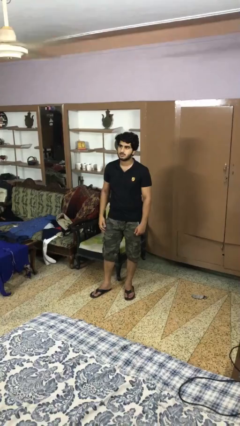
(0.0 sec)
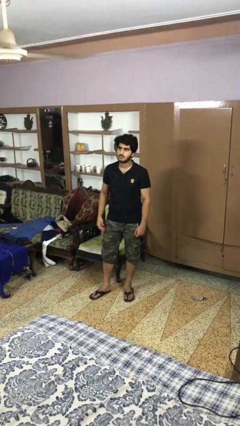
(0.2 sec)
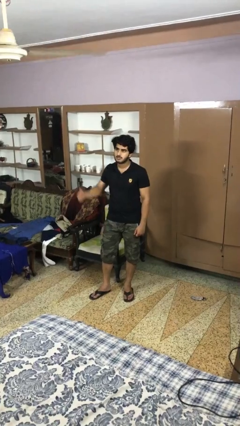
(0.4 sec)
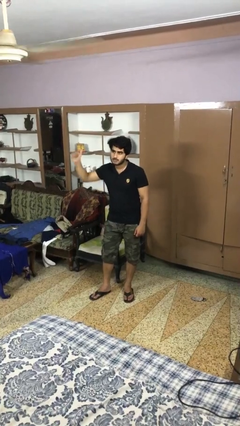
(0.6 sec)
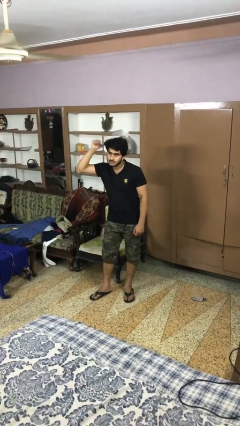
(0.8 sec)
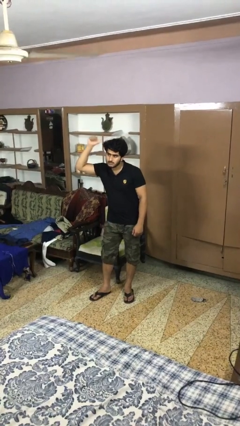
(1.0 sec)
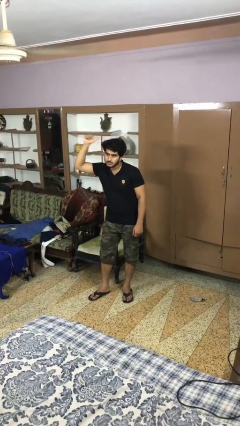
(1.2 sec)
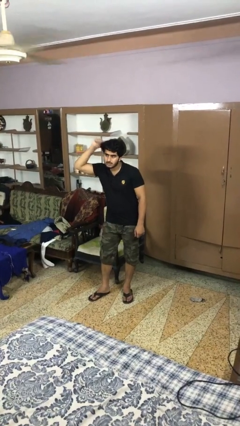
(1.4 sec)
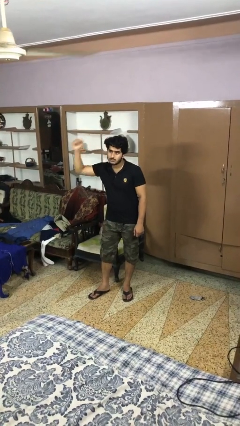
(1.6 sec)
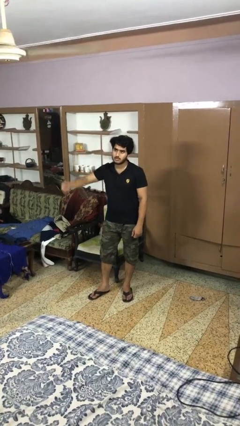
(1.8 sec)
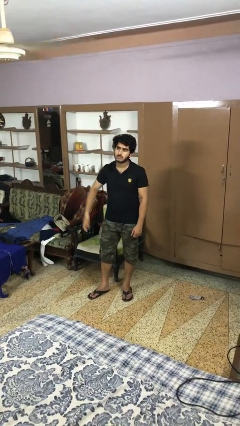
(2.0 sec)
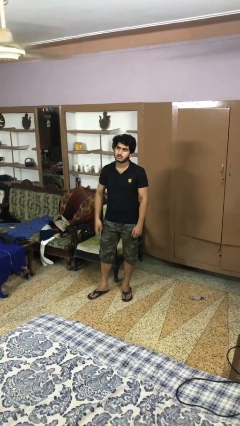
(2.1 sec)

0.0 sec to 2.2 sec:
person gestures behind me

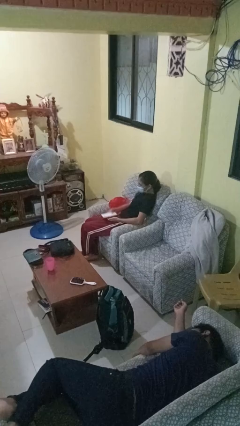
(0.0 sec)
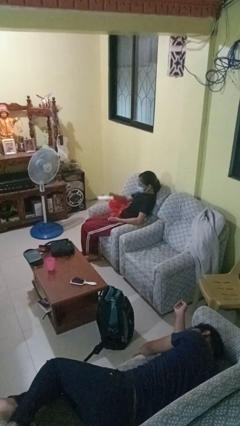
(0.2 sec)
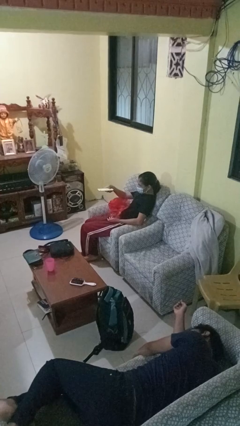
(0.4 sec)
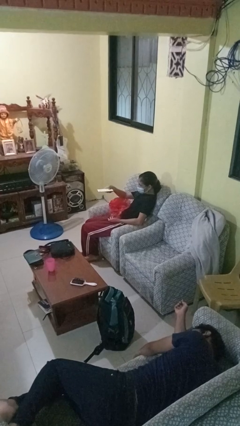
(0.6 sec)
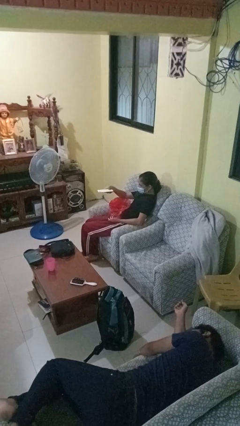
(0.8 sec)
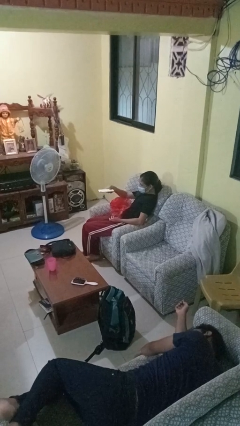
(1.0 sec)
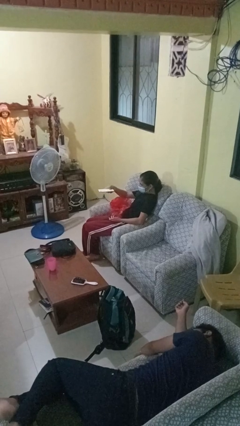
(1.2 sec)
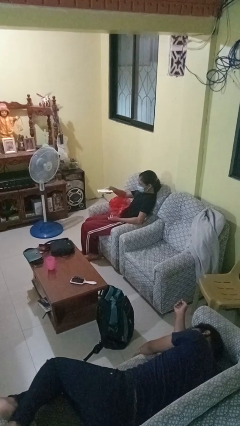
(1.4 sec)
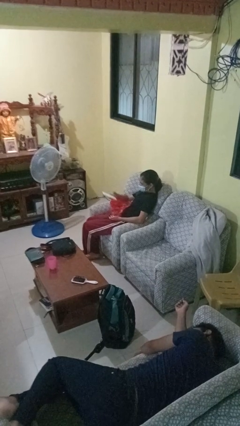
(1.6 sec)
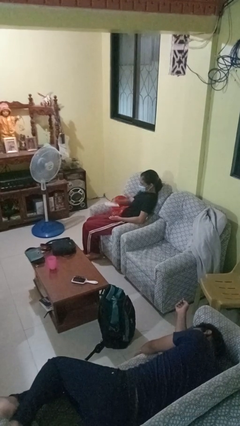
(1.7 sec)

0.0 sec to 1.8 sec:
person uses television remote

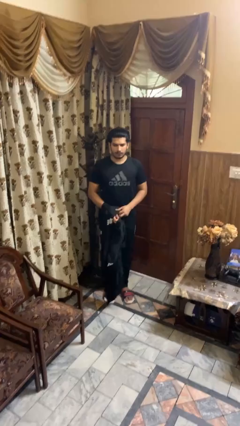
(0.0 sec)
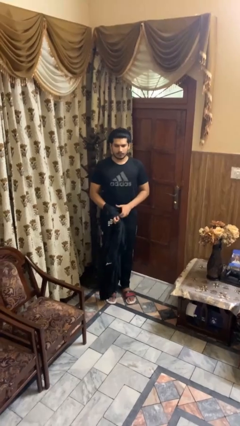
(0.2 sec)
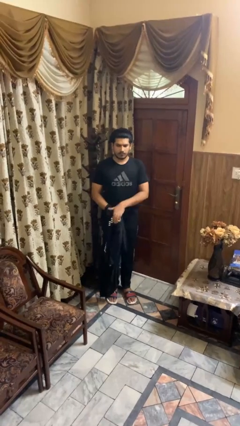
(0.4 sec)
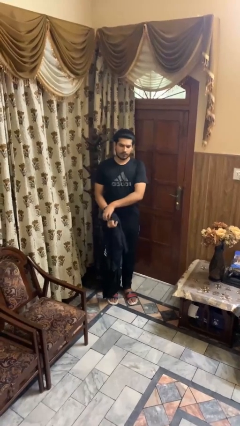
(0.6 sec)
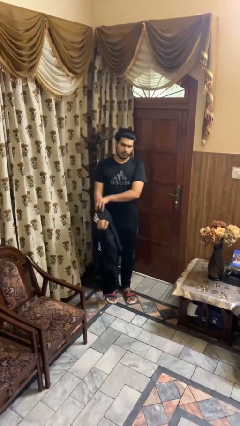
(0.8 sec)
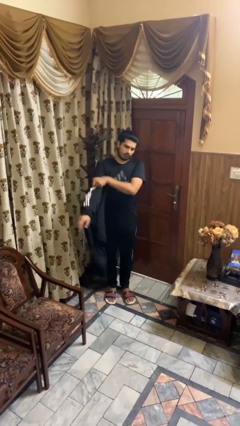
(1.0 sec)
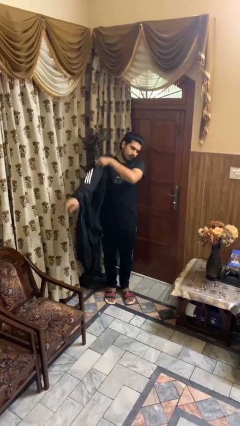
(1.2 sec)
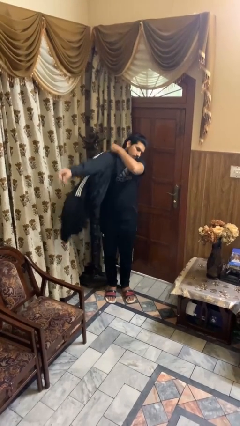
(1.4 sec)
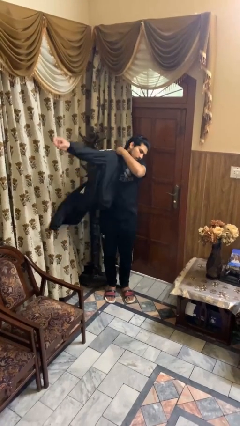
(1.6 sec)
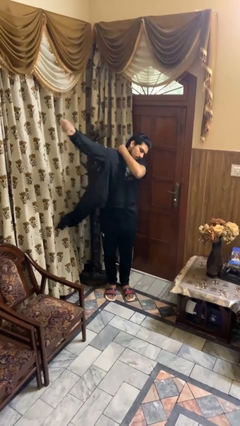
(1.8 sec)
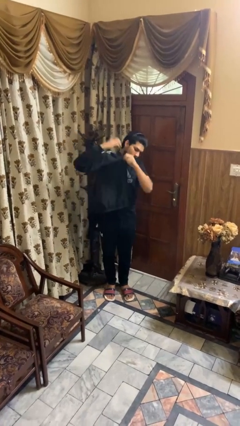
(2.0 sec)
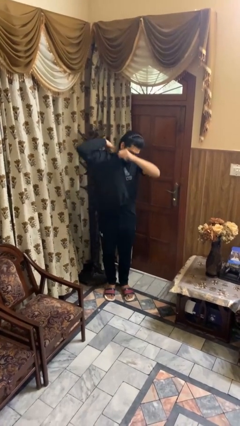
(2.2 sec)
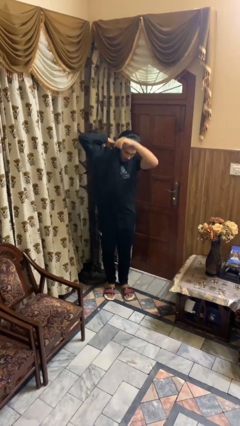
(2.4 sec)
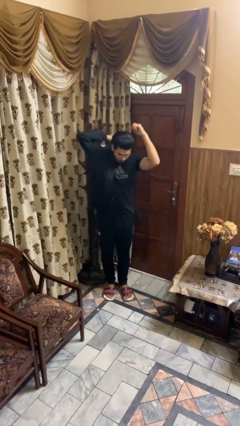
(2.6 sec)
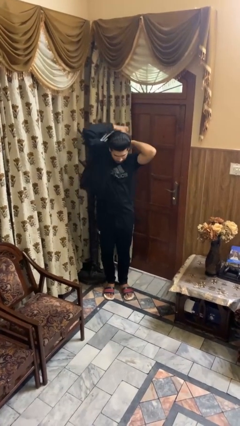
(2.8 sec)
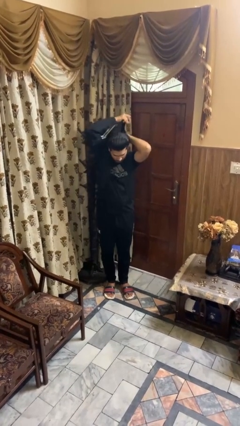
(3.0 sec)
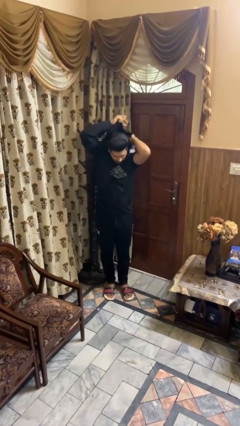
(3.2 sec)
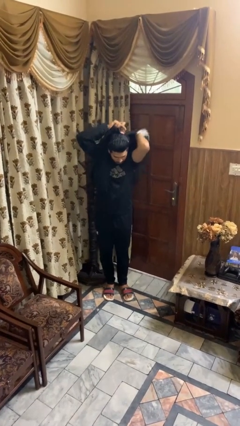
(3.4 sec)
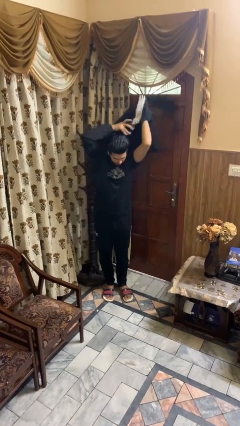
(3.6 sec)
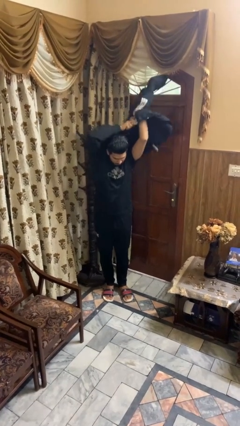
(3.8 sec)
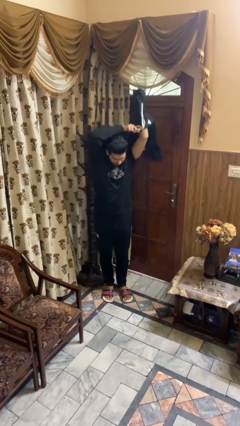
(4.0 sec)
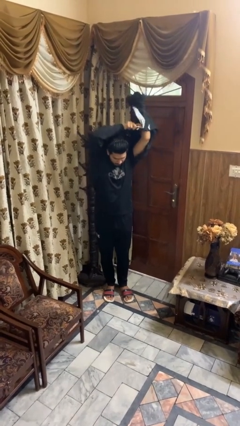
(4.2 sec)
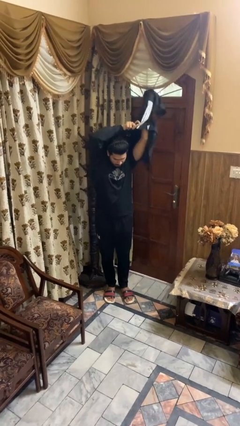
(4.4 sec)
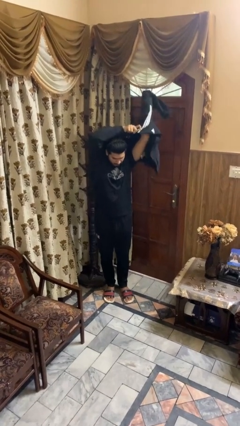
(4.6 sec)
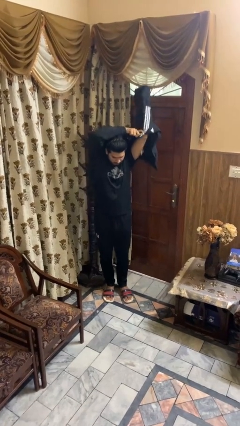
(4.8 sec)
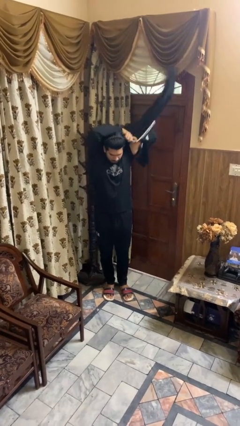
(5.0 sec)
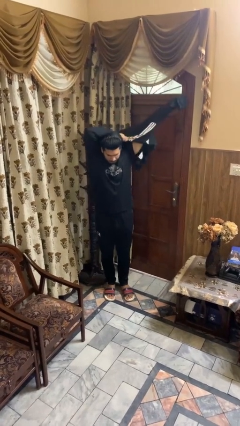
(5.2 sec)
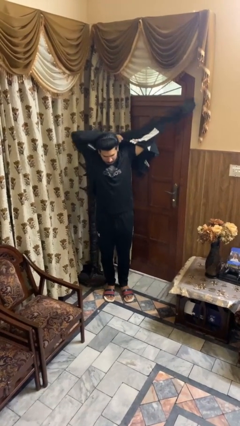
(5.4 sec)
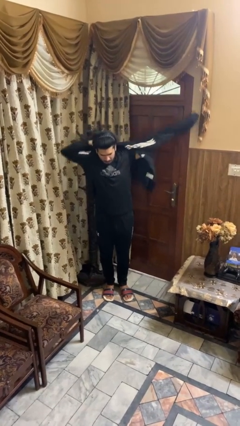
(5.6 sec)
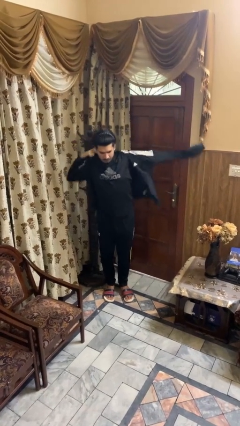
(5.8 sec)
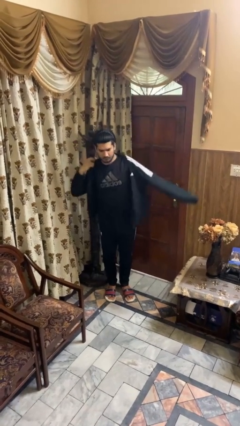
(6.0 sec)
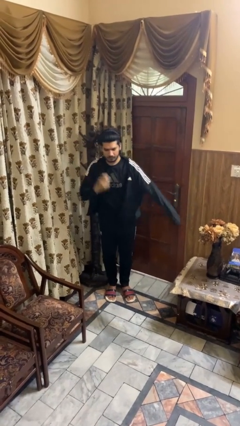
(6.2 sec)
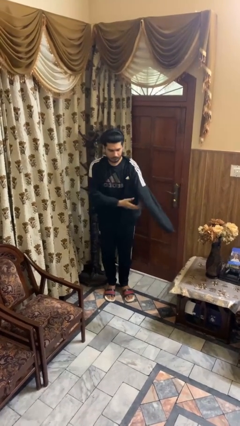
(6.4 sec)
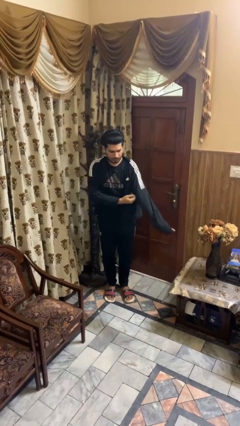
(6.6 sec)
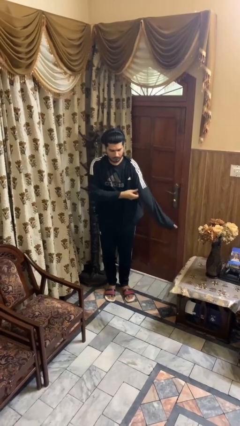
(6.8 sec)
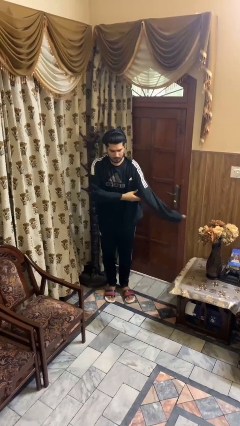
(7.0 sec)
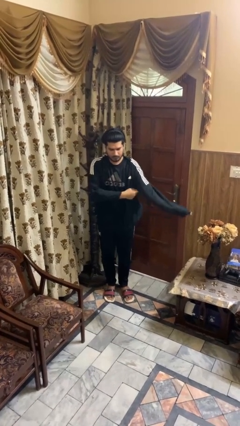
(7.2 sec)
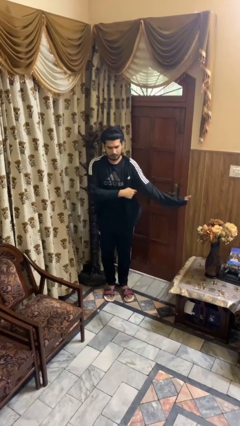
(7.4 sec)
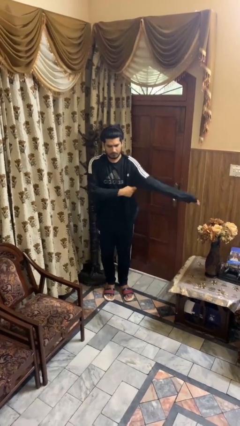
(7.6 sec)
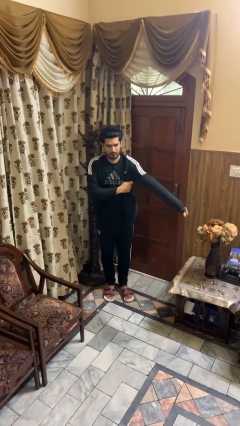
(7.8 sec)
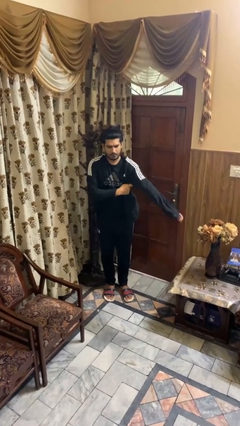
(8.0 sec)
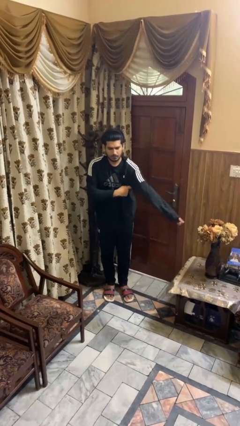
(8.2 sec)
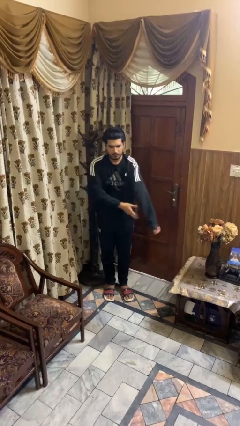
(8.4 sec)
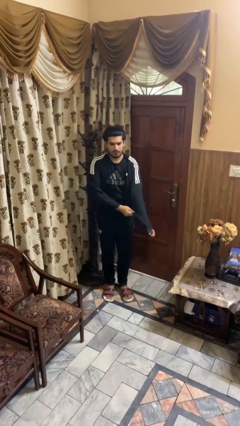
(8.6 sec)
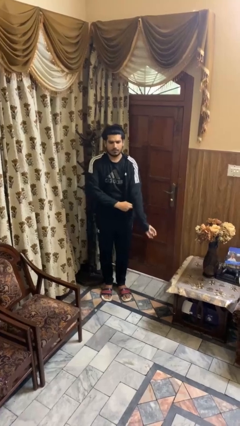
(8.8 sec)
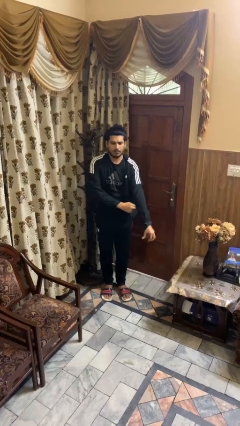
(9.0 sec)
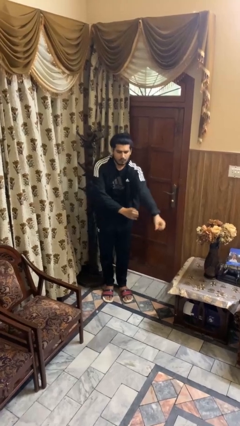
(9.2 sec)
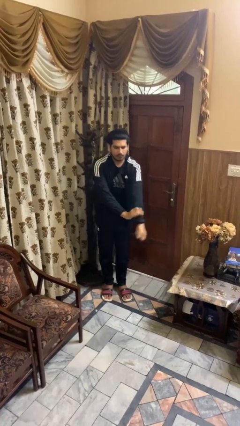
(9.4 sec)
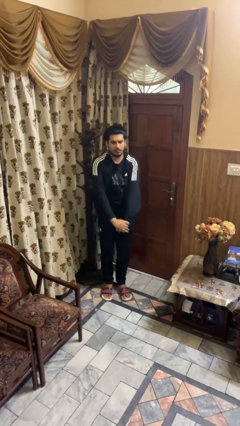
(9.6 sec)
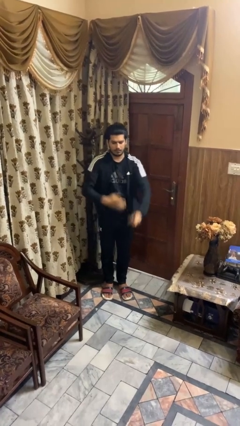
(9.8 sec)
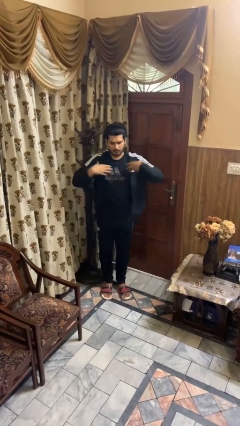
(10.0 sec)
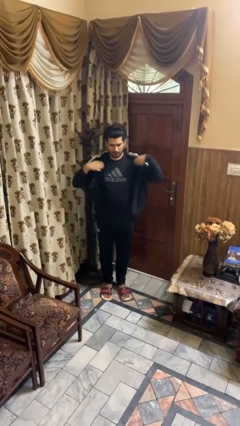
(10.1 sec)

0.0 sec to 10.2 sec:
person puts on jacket

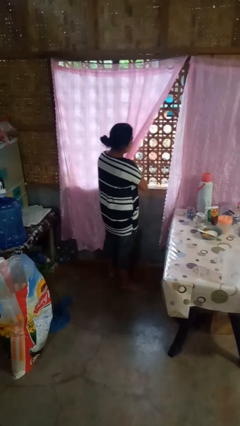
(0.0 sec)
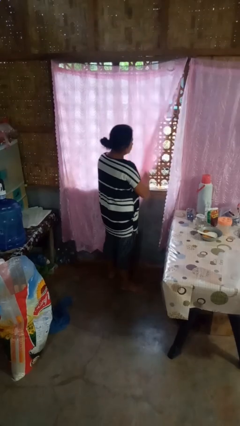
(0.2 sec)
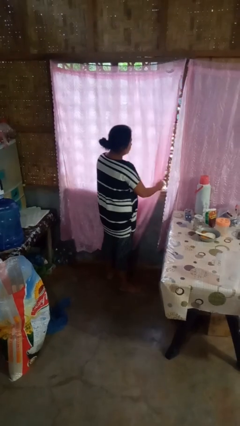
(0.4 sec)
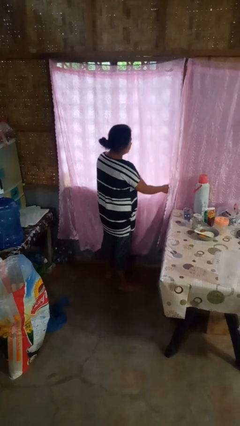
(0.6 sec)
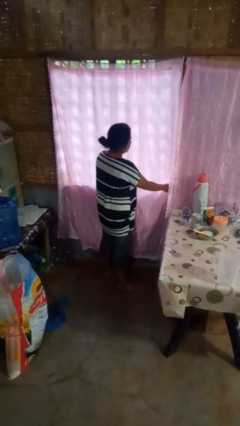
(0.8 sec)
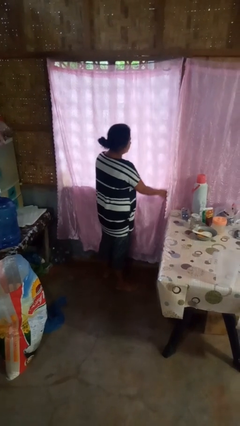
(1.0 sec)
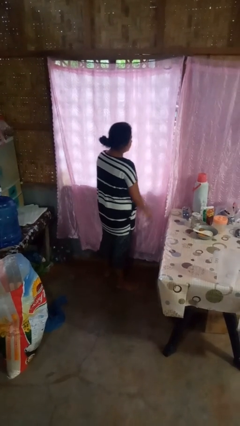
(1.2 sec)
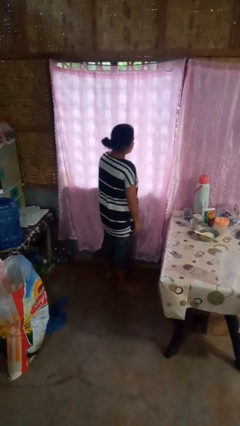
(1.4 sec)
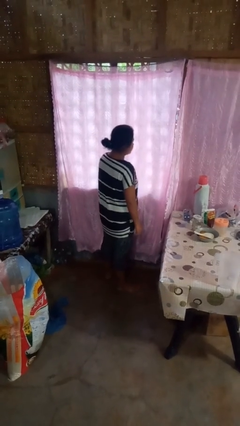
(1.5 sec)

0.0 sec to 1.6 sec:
person closes curtains

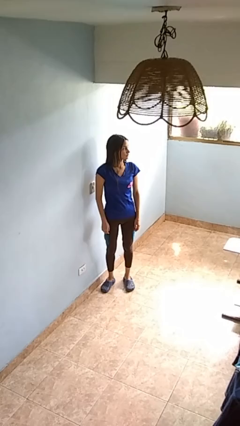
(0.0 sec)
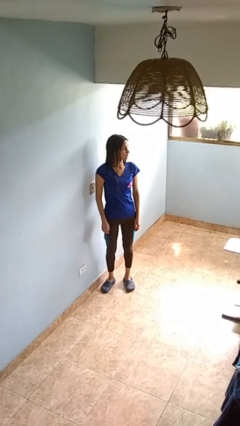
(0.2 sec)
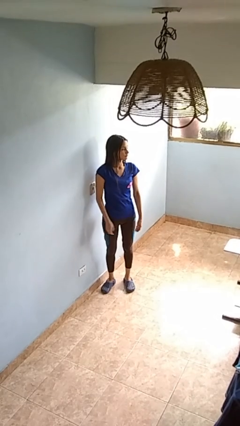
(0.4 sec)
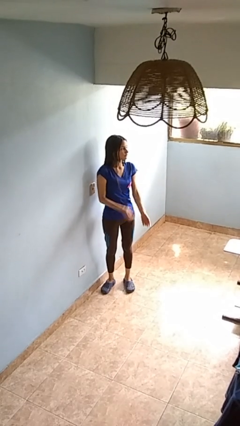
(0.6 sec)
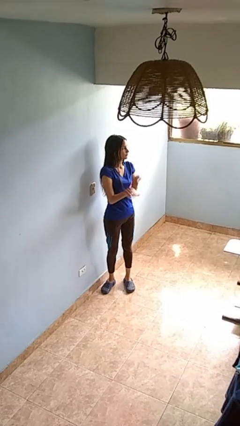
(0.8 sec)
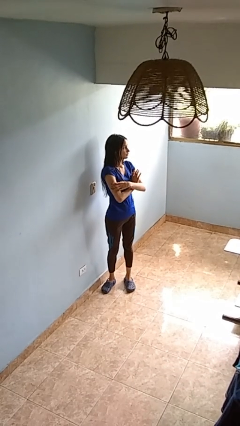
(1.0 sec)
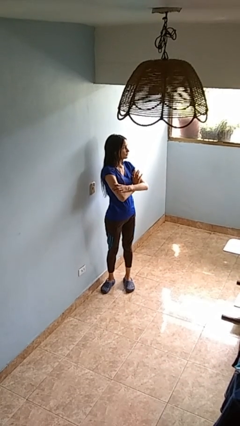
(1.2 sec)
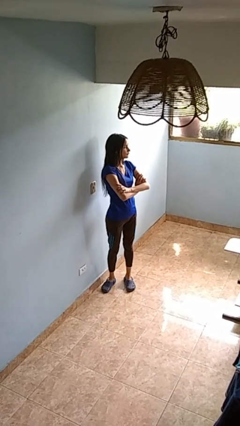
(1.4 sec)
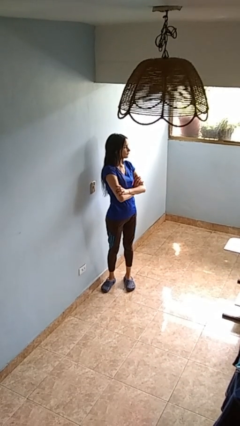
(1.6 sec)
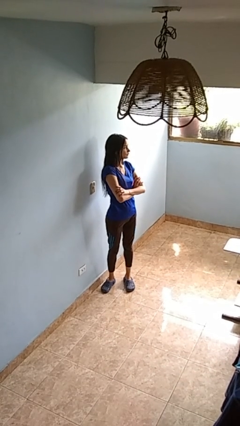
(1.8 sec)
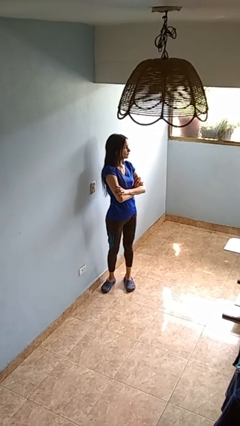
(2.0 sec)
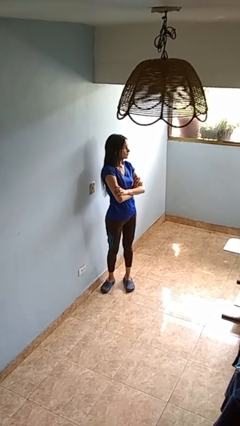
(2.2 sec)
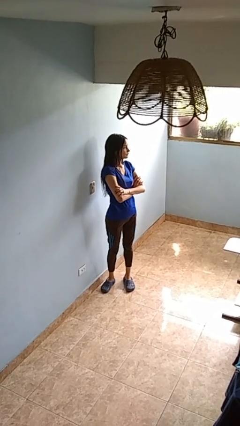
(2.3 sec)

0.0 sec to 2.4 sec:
person crosses arms
